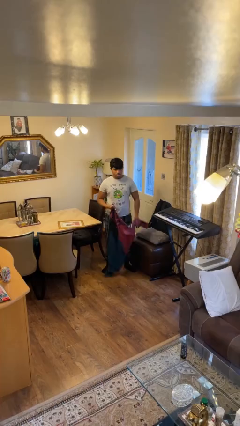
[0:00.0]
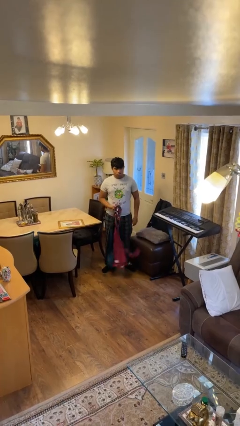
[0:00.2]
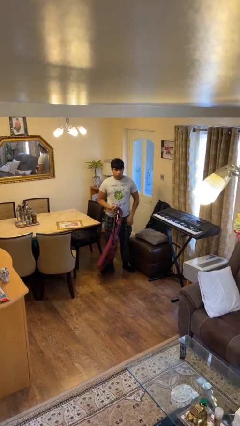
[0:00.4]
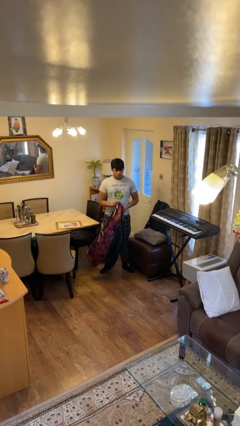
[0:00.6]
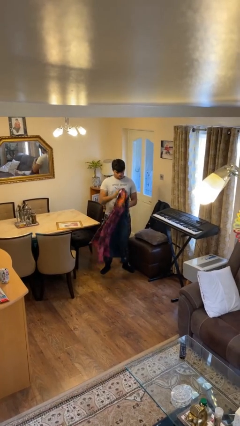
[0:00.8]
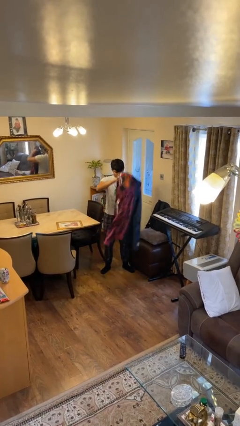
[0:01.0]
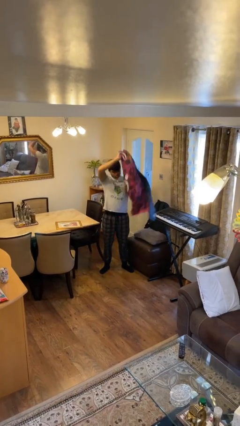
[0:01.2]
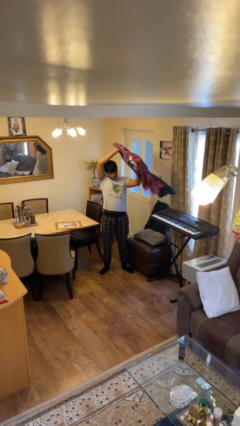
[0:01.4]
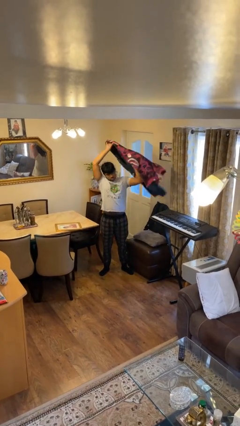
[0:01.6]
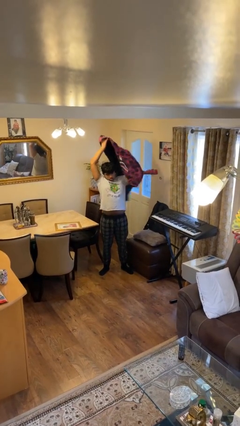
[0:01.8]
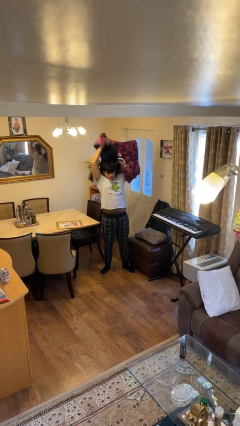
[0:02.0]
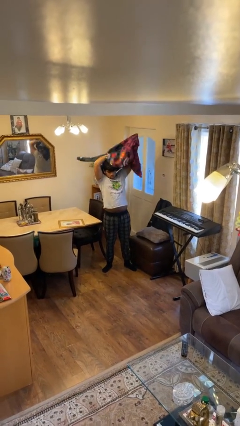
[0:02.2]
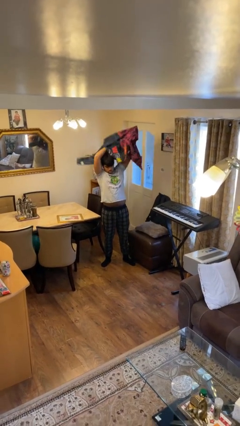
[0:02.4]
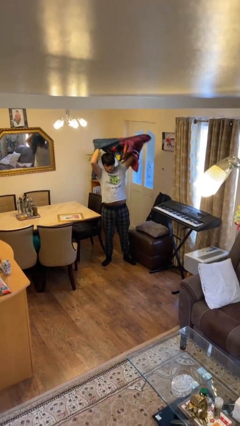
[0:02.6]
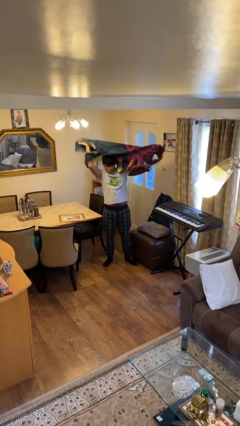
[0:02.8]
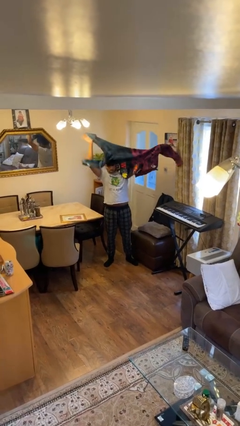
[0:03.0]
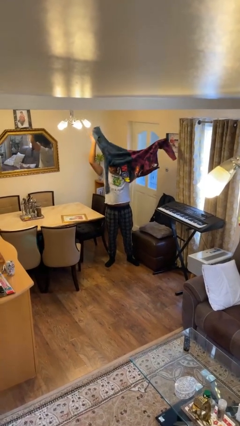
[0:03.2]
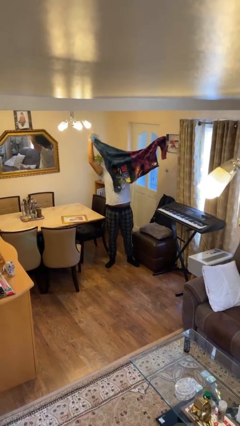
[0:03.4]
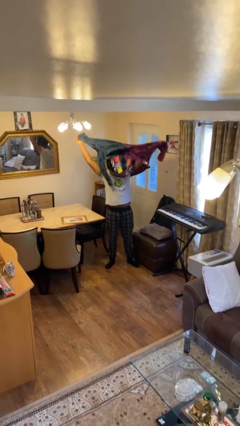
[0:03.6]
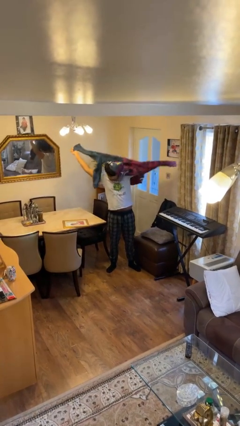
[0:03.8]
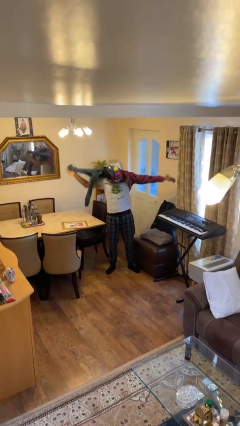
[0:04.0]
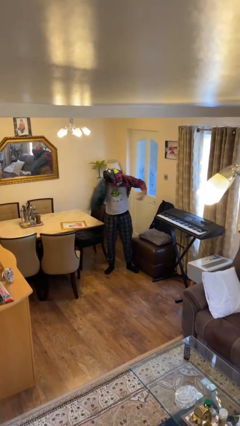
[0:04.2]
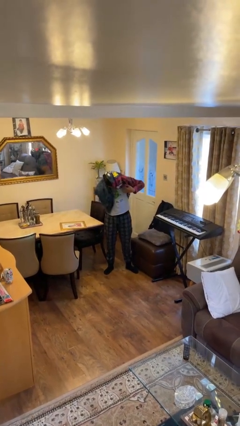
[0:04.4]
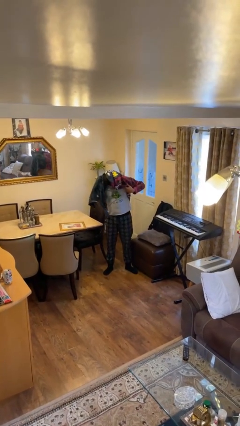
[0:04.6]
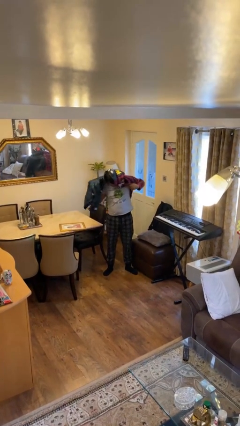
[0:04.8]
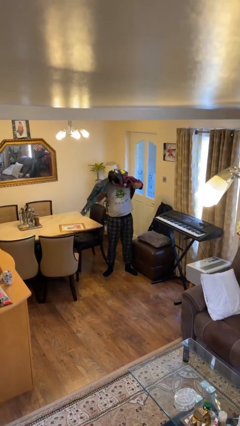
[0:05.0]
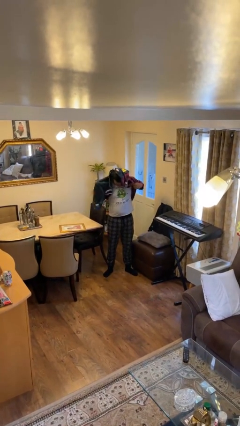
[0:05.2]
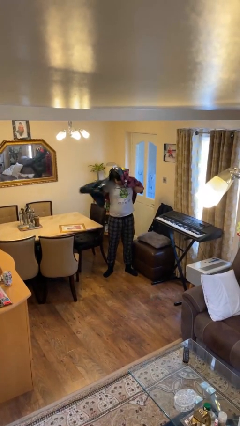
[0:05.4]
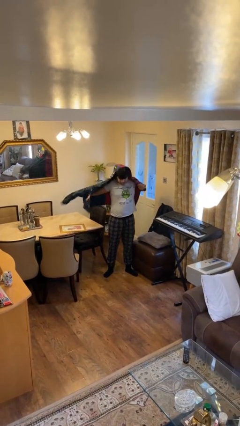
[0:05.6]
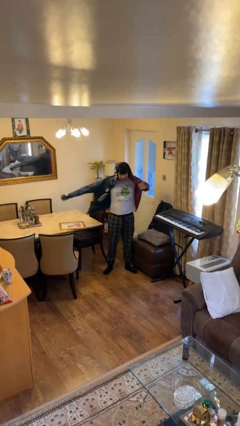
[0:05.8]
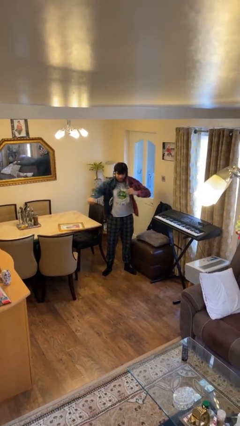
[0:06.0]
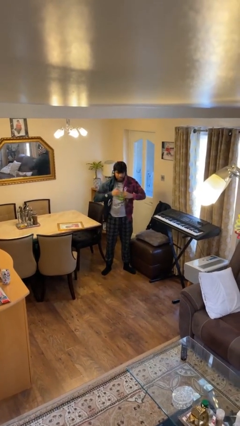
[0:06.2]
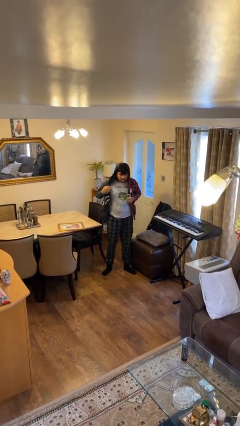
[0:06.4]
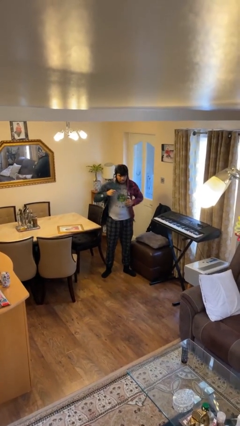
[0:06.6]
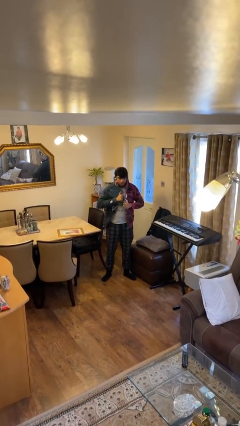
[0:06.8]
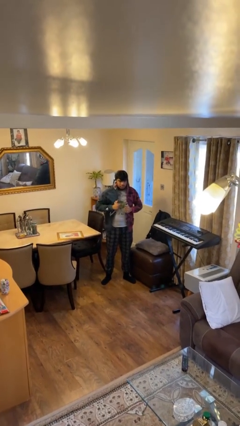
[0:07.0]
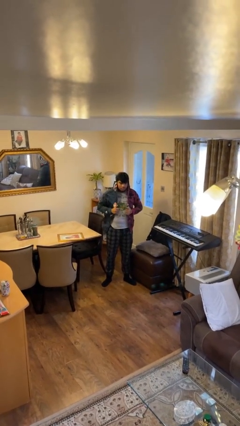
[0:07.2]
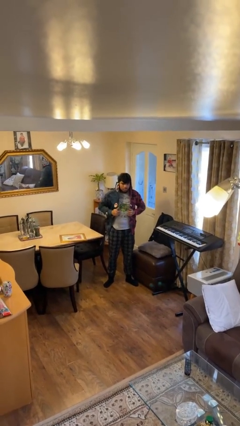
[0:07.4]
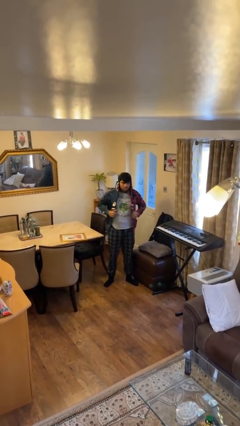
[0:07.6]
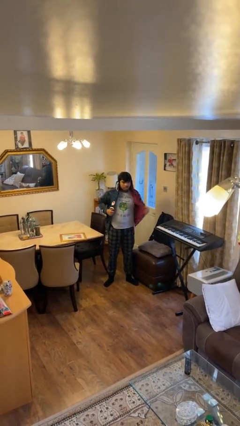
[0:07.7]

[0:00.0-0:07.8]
person puts on hoodie

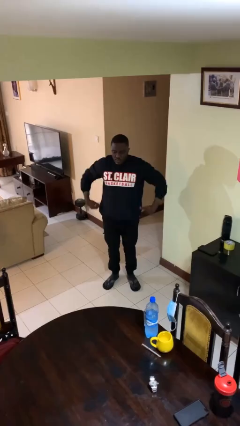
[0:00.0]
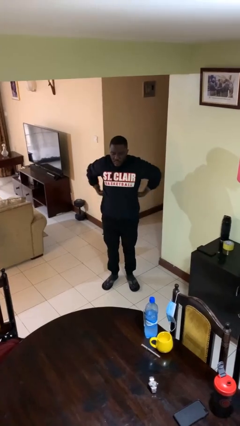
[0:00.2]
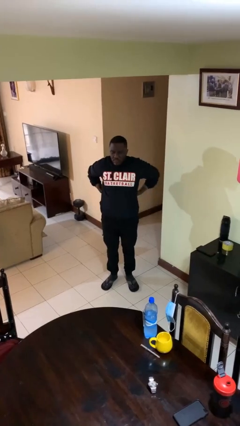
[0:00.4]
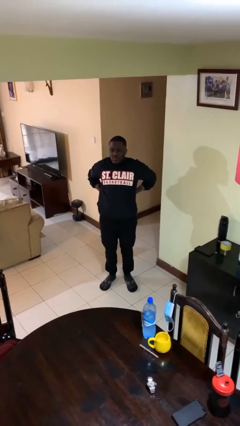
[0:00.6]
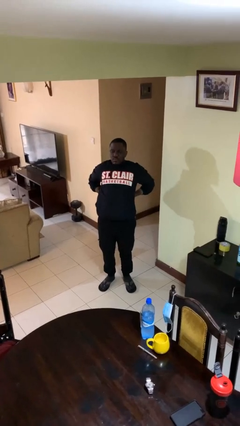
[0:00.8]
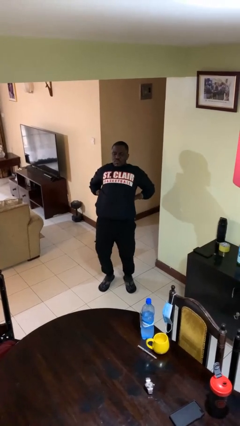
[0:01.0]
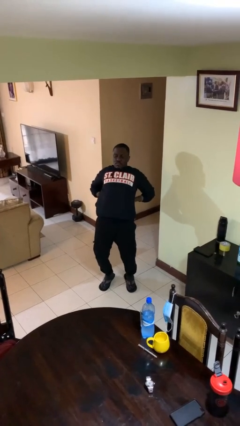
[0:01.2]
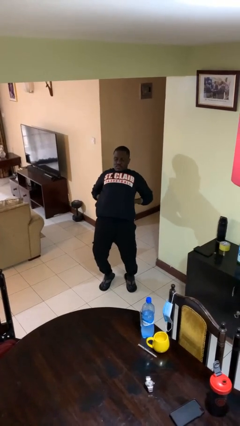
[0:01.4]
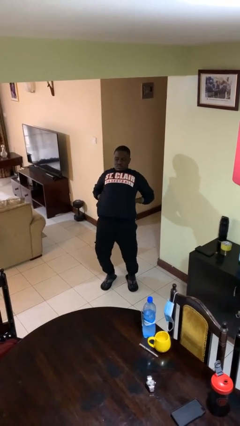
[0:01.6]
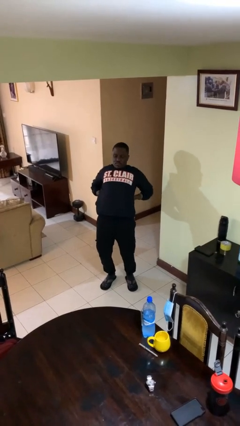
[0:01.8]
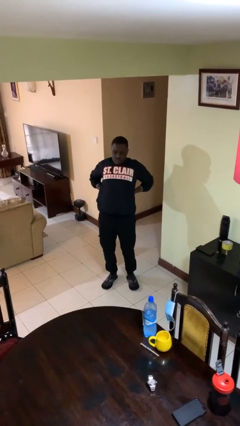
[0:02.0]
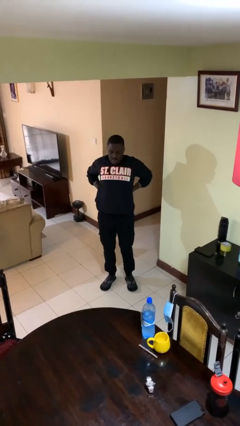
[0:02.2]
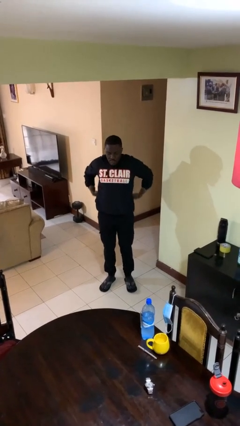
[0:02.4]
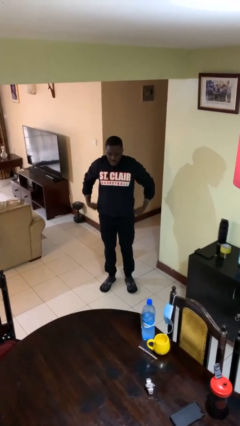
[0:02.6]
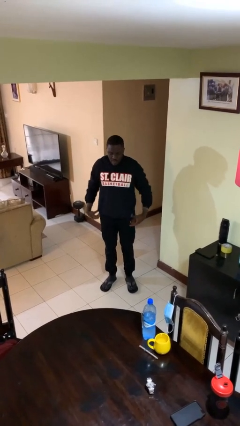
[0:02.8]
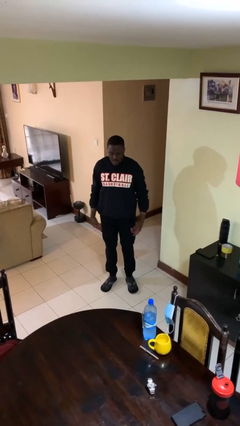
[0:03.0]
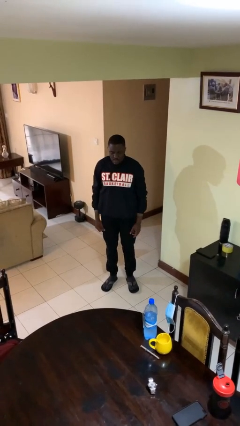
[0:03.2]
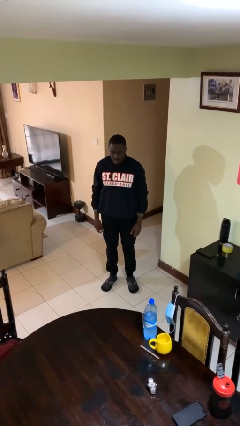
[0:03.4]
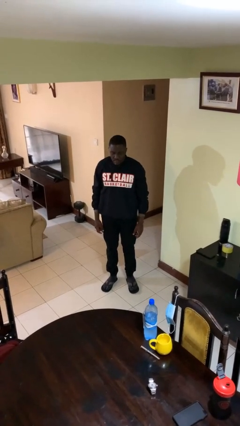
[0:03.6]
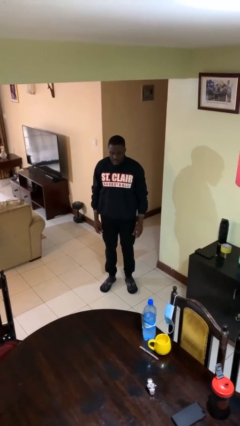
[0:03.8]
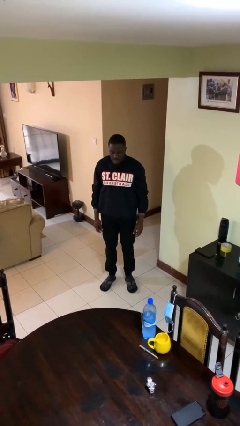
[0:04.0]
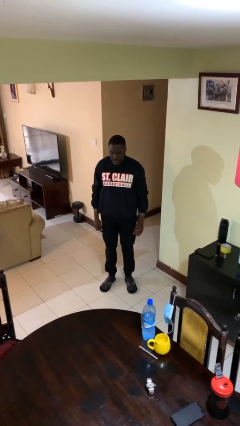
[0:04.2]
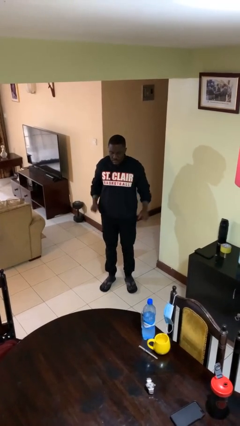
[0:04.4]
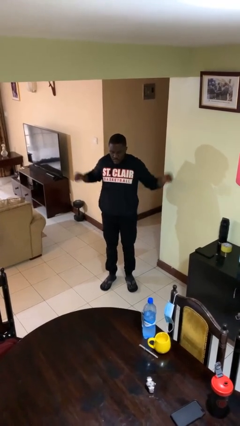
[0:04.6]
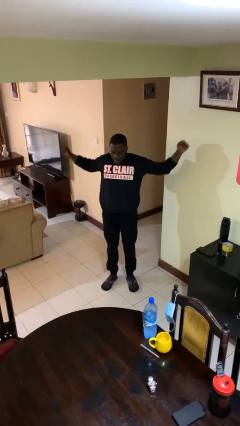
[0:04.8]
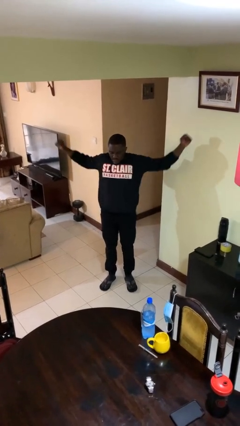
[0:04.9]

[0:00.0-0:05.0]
person stretches back

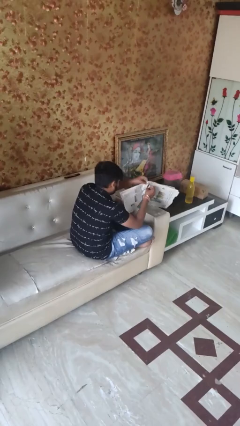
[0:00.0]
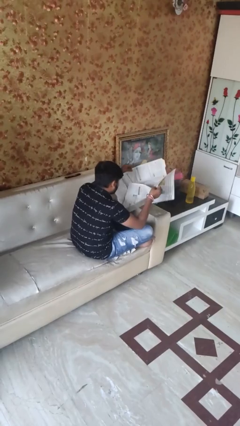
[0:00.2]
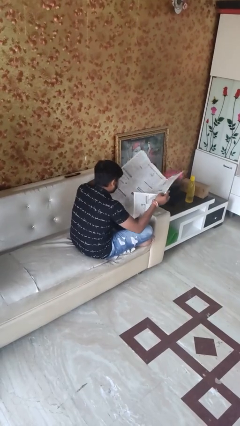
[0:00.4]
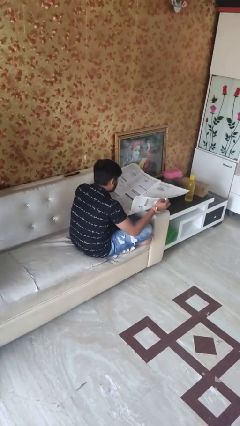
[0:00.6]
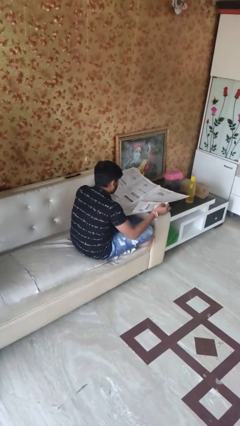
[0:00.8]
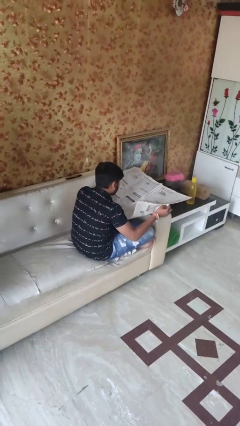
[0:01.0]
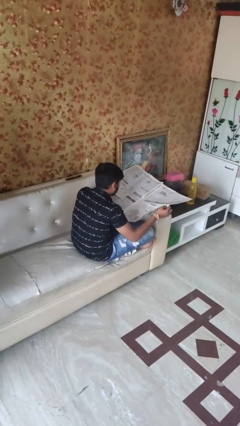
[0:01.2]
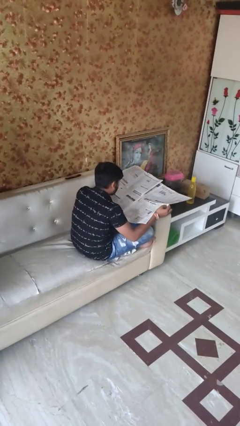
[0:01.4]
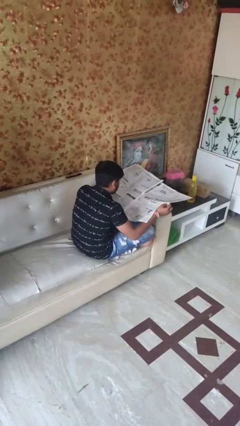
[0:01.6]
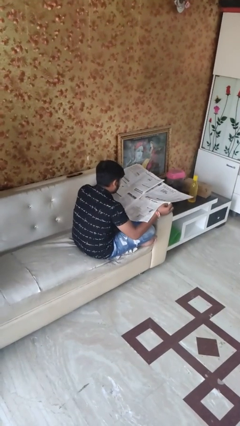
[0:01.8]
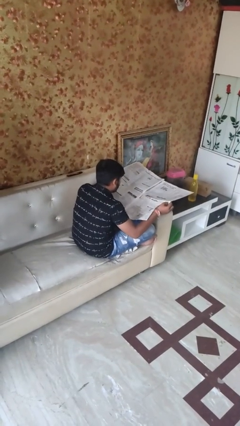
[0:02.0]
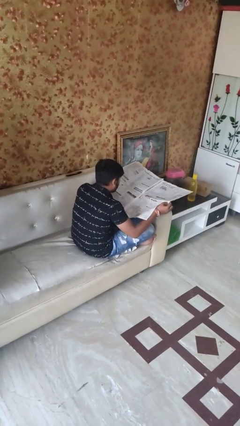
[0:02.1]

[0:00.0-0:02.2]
person reads newspaper

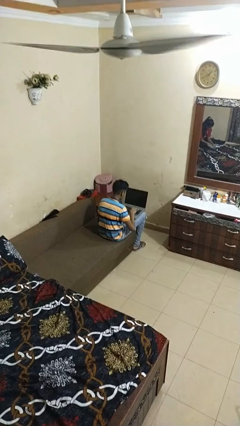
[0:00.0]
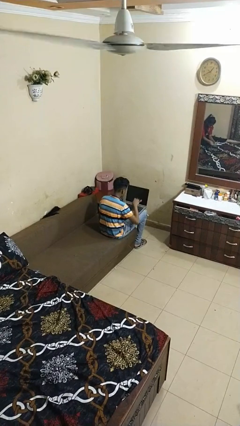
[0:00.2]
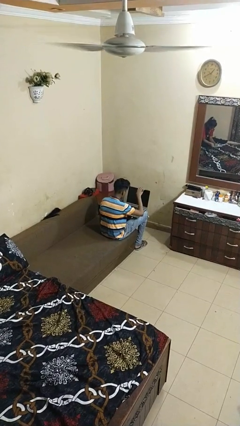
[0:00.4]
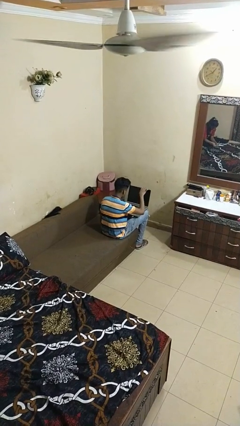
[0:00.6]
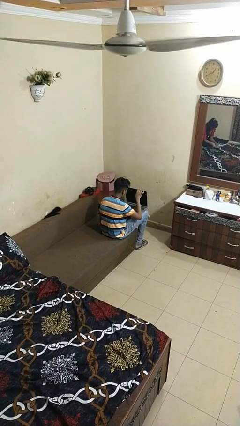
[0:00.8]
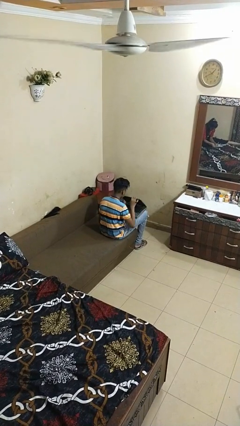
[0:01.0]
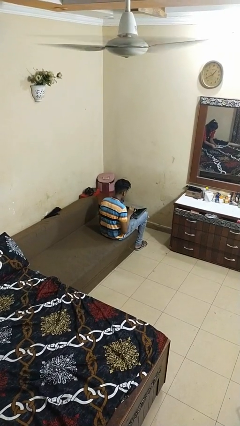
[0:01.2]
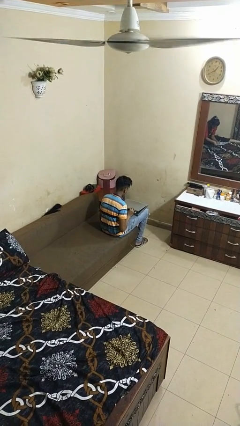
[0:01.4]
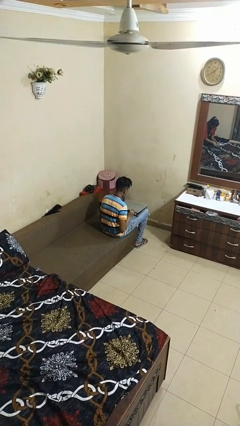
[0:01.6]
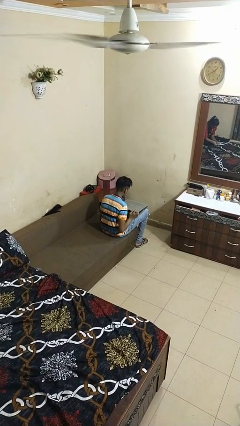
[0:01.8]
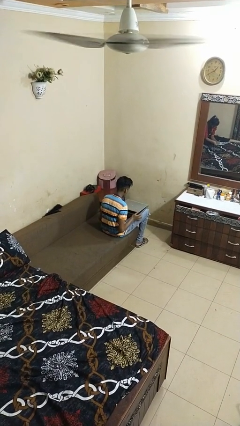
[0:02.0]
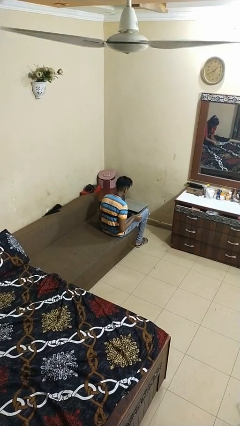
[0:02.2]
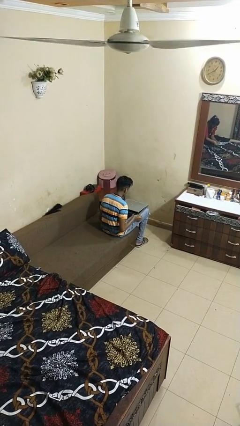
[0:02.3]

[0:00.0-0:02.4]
person closes laptop

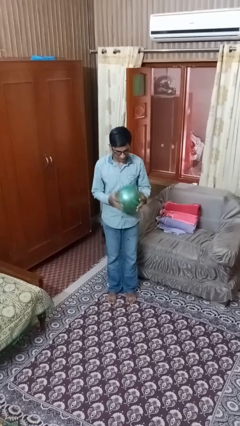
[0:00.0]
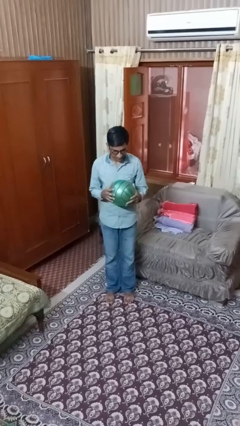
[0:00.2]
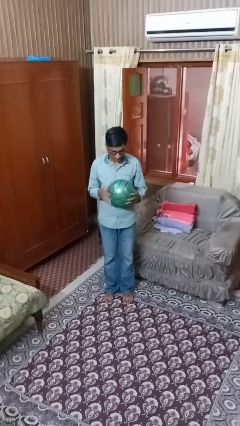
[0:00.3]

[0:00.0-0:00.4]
person bounces ball on floor
